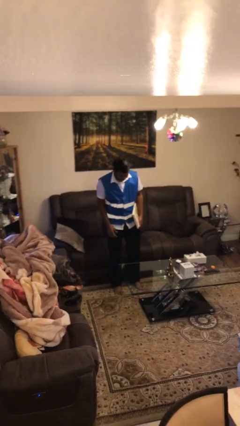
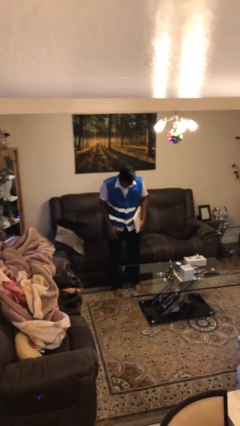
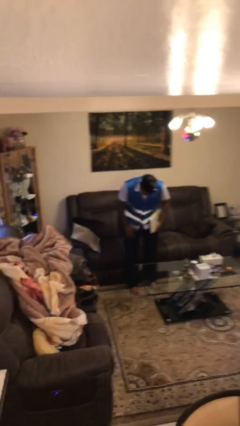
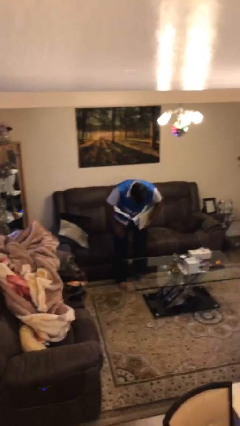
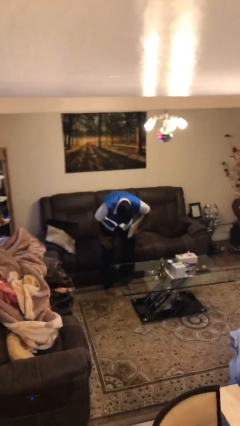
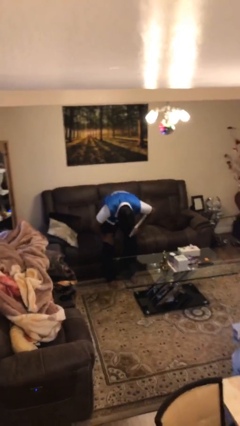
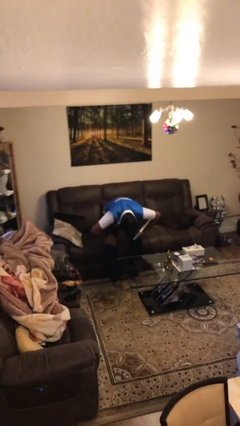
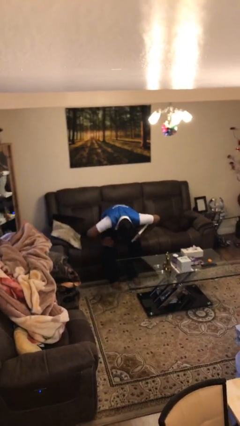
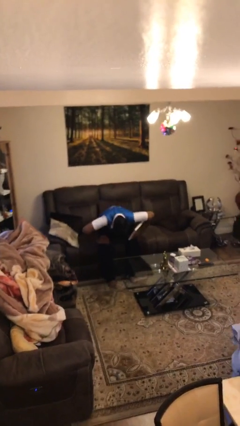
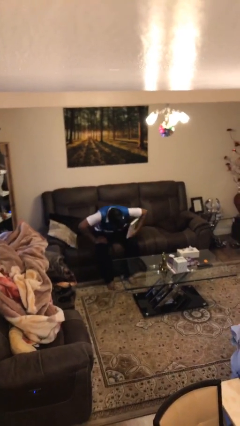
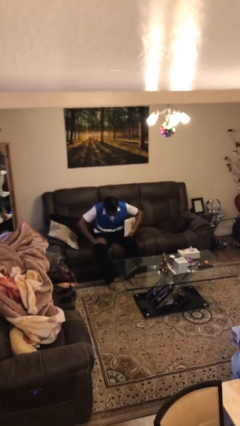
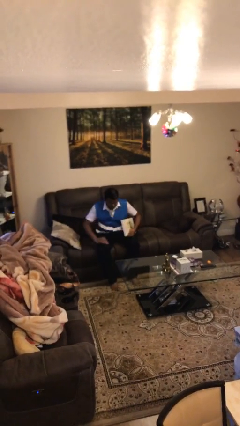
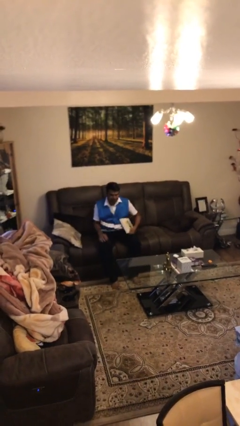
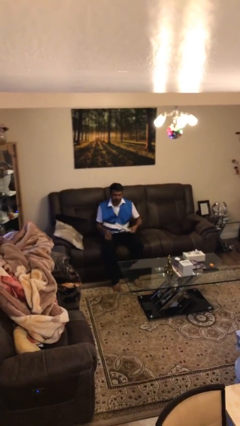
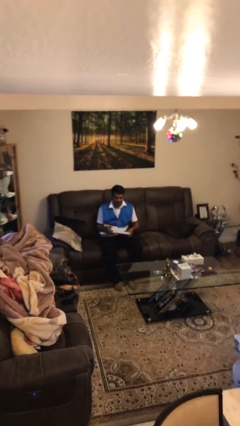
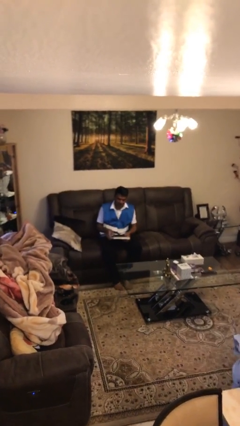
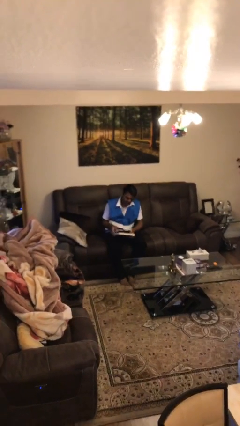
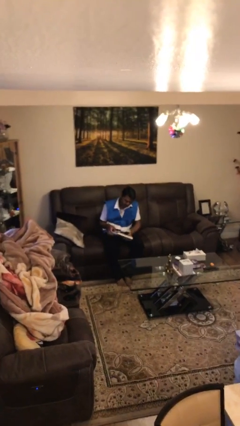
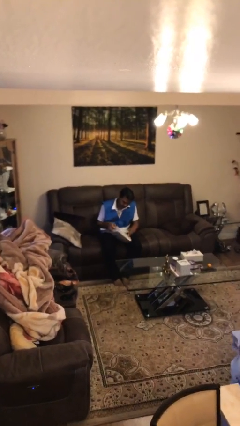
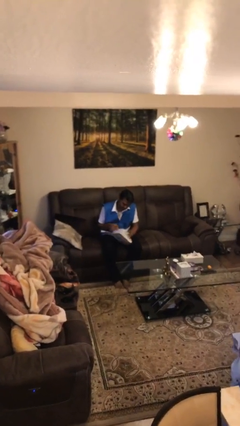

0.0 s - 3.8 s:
person sits down

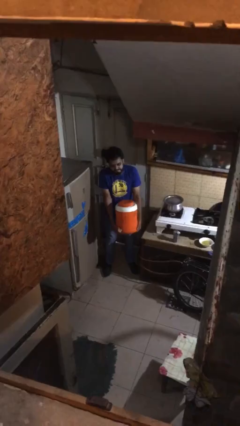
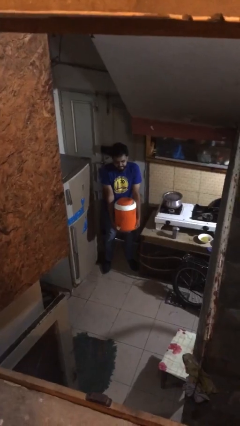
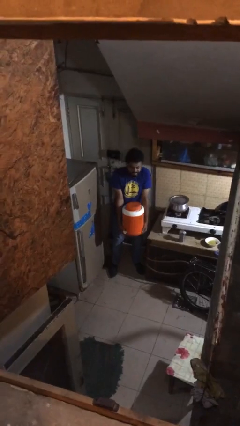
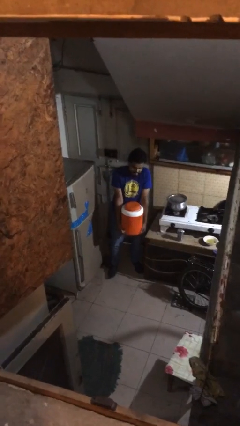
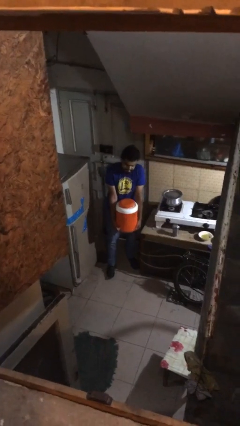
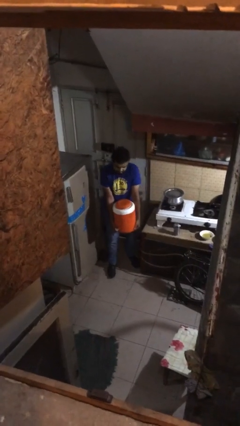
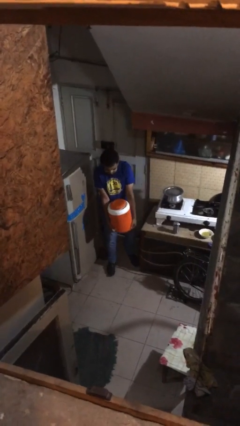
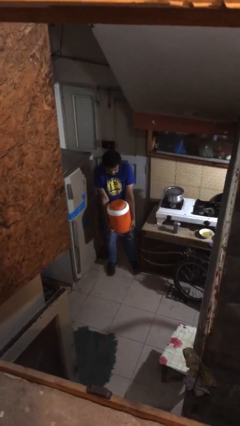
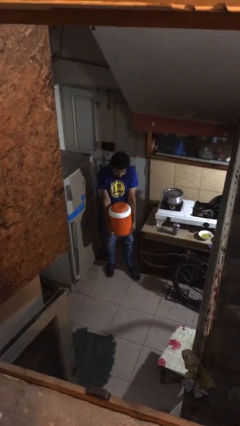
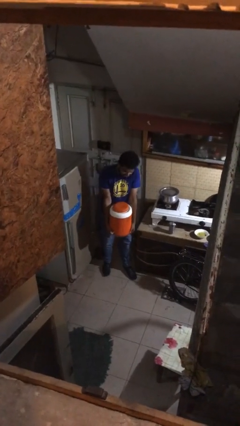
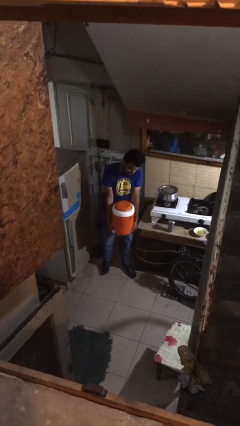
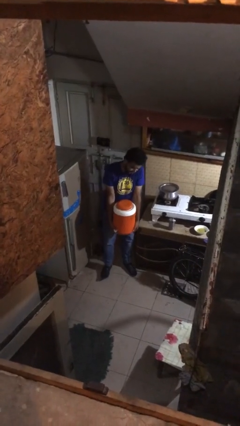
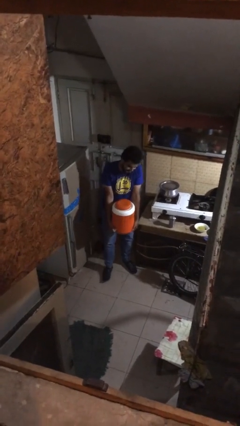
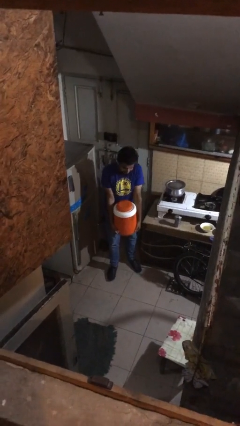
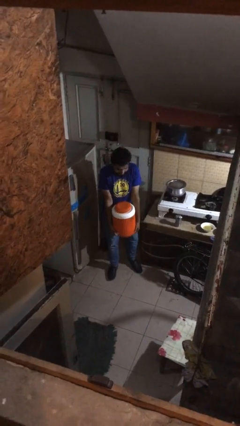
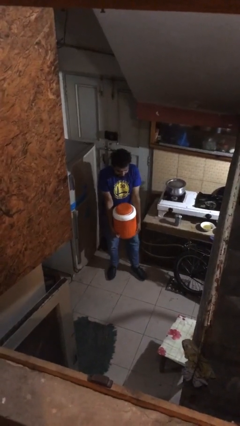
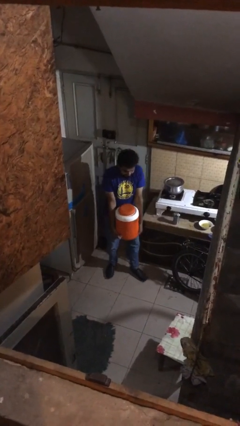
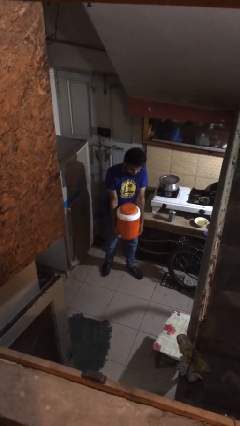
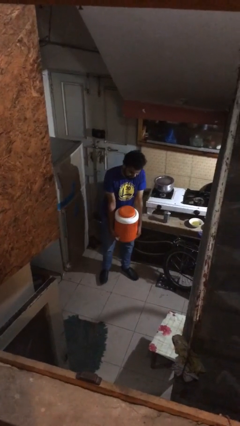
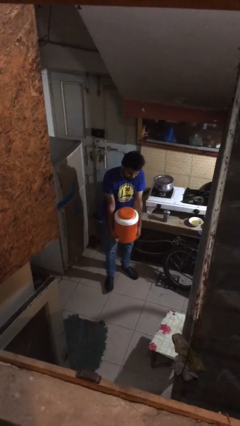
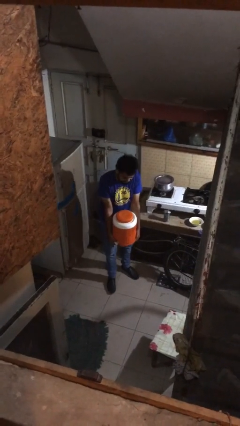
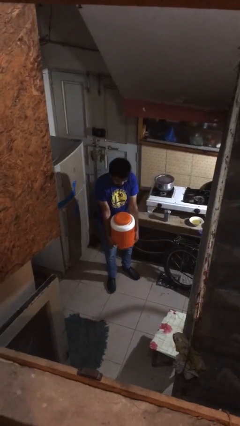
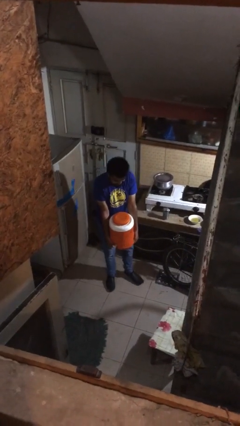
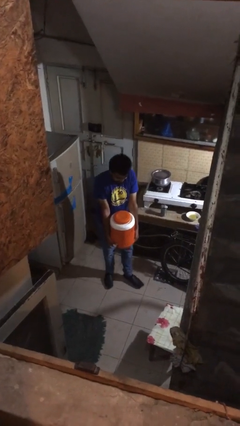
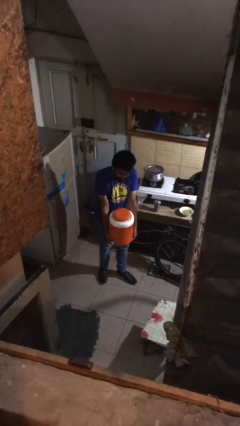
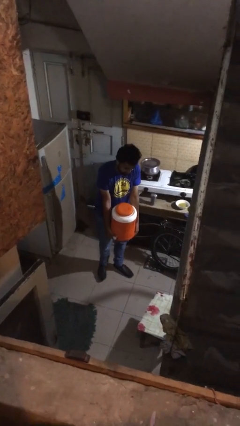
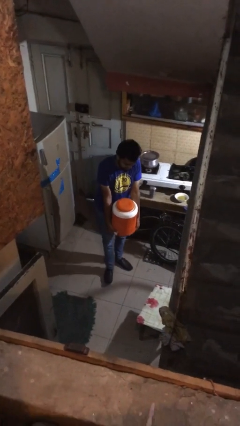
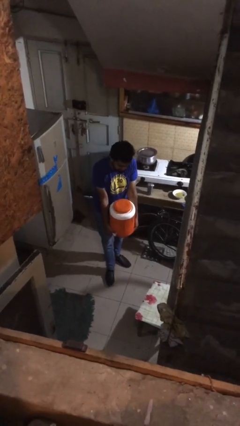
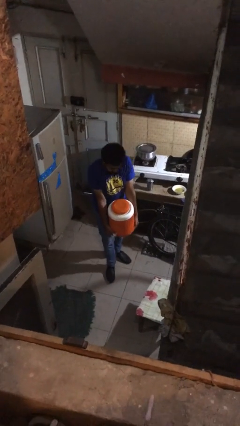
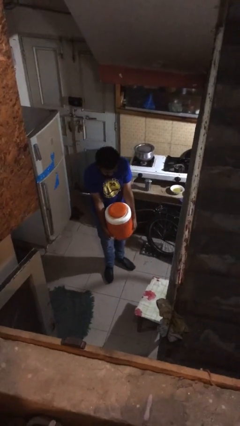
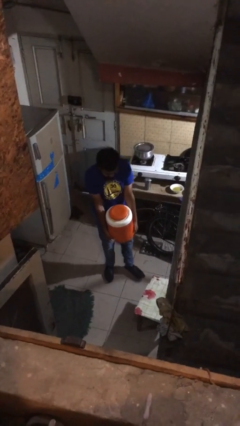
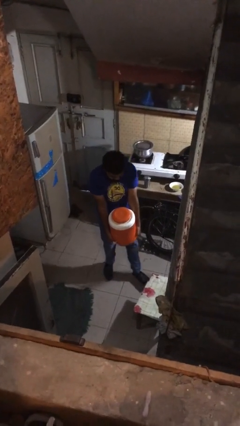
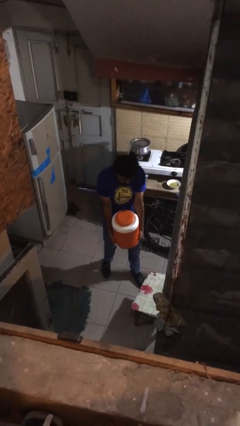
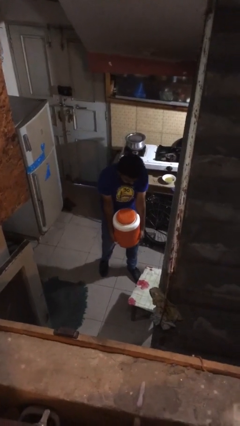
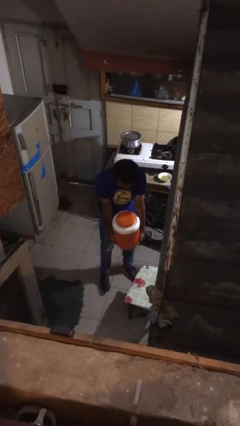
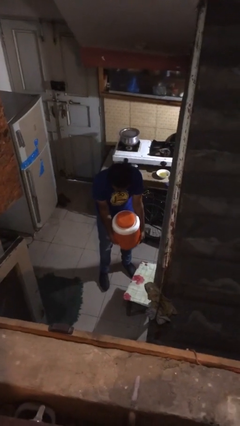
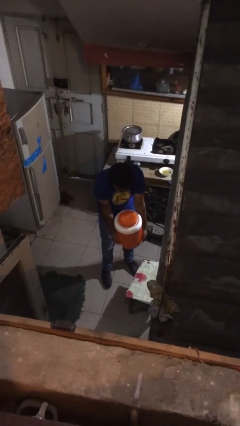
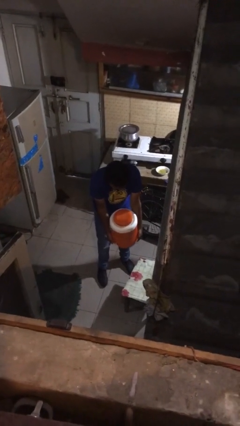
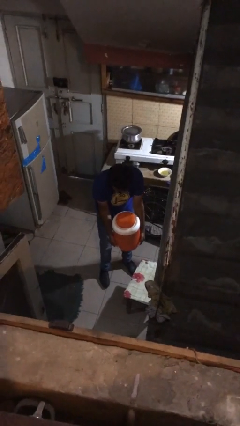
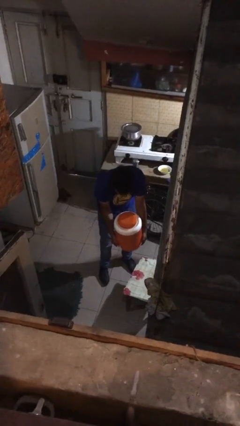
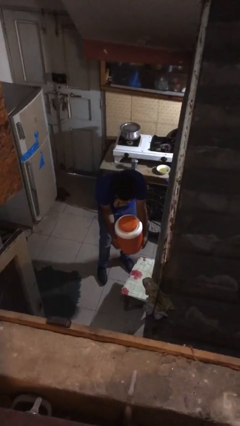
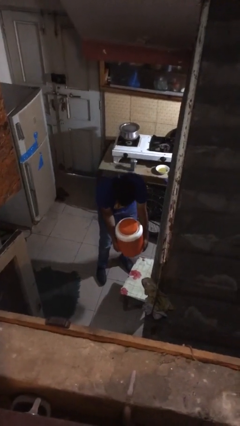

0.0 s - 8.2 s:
person carries heavy object

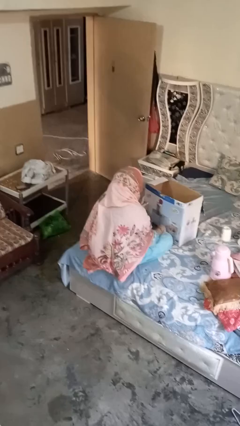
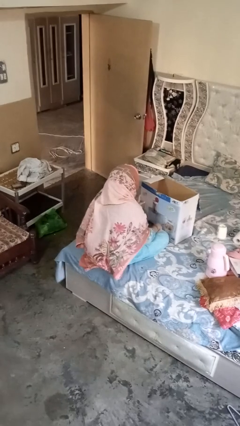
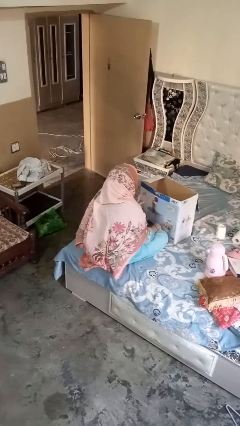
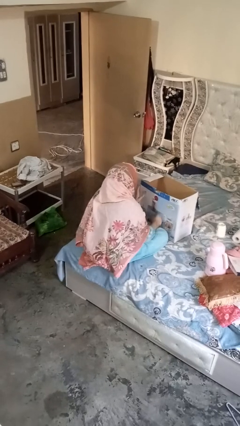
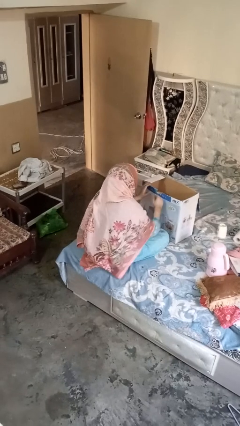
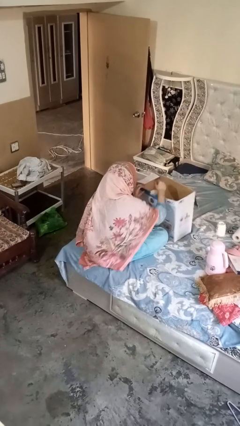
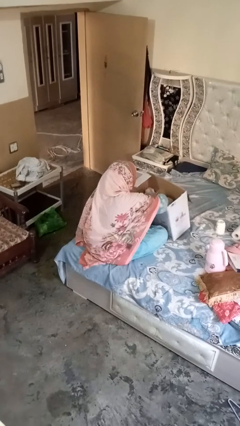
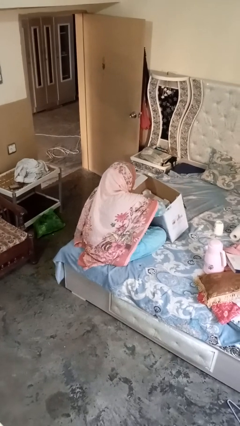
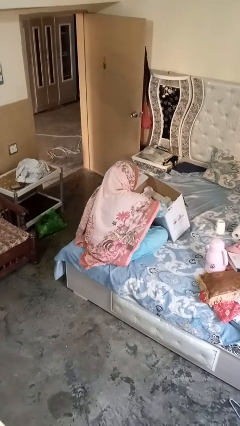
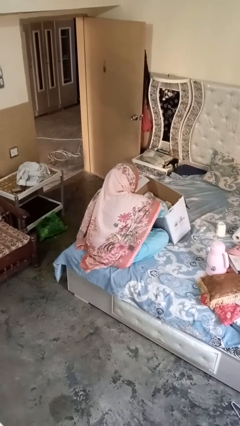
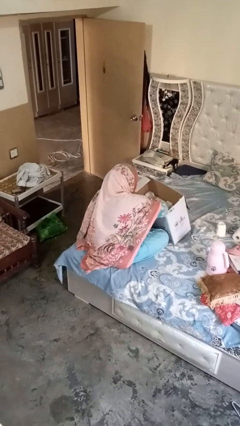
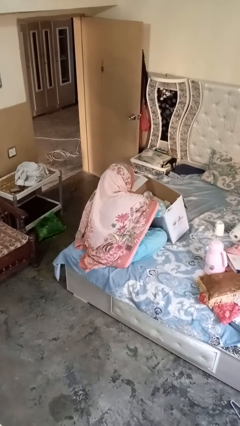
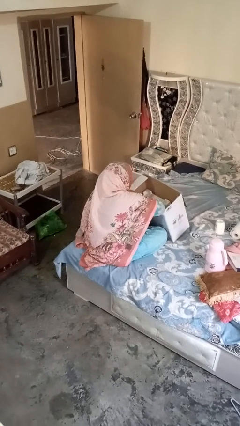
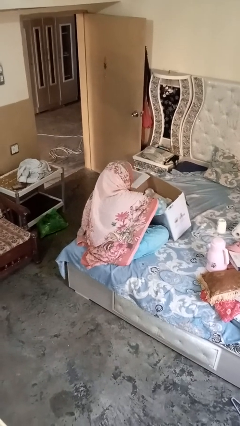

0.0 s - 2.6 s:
person searches in box

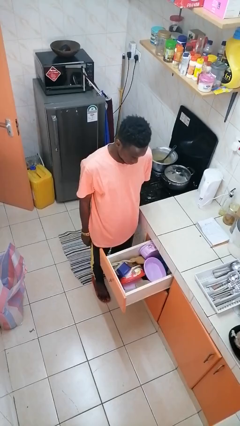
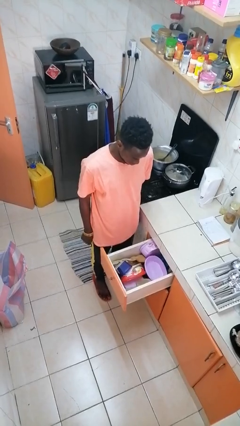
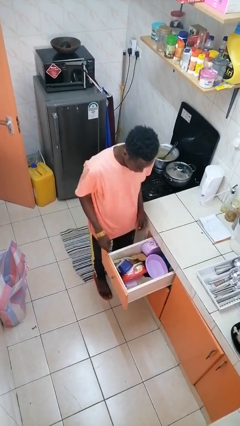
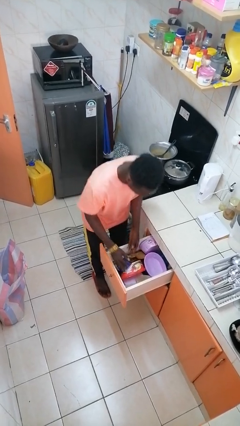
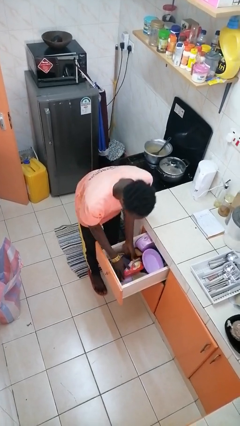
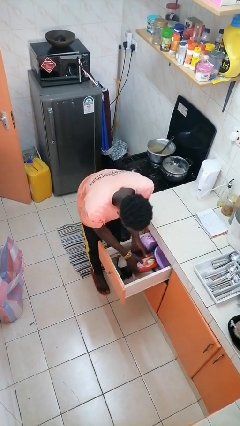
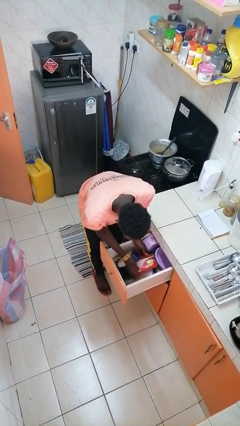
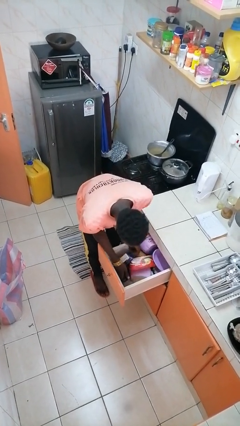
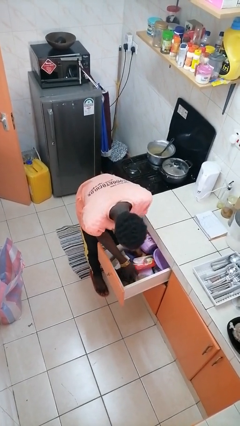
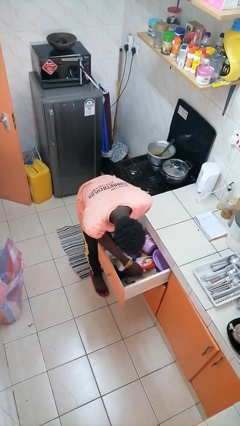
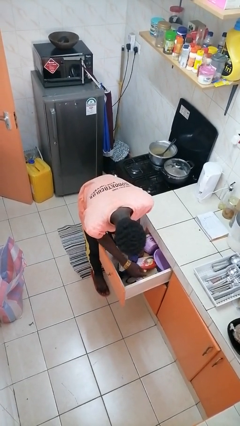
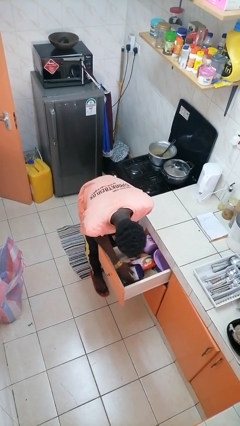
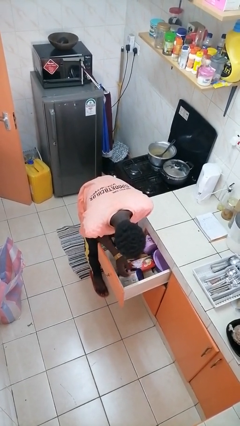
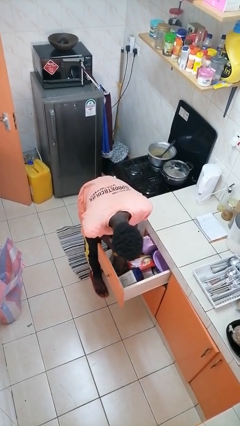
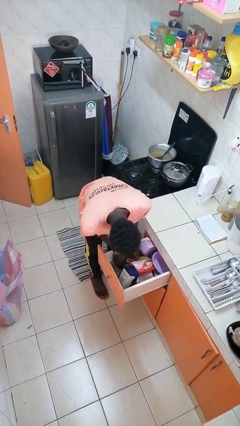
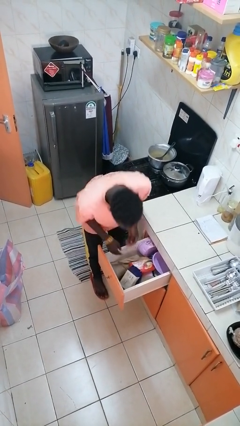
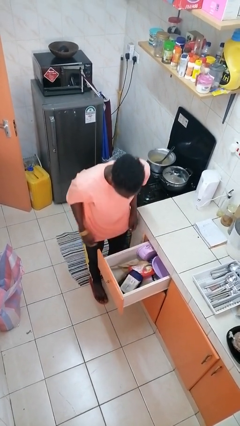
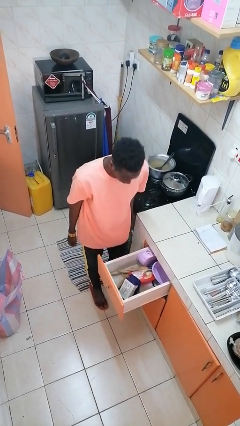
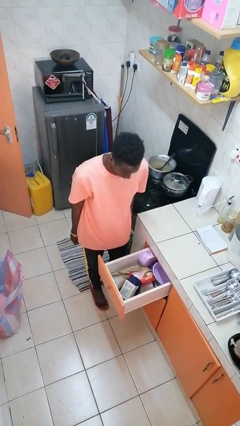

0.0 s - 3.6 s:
person searches in kitchen drawer
